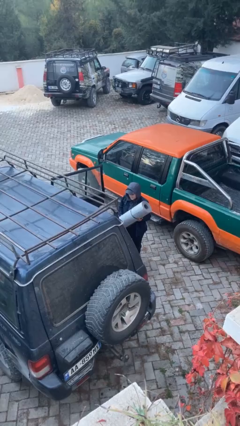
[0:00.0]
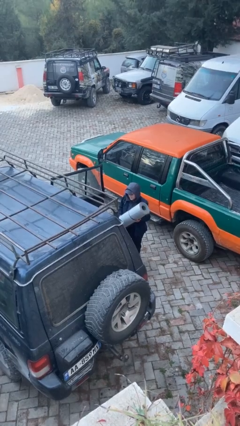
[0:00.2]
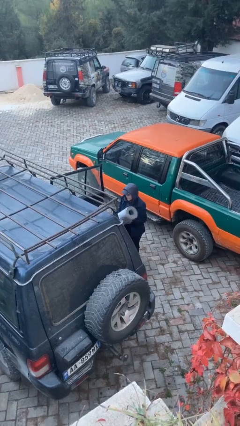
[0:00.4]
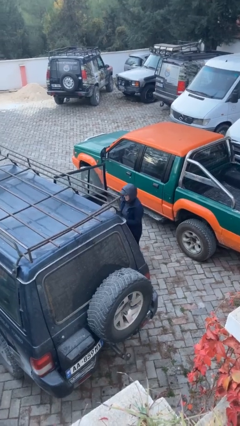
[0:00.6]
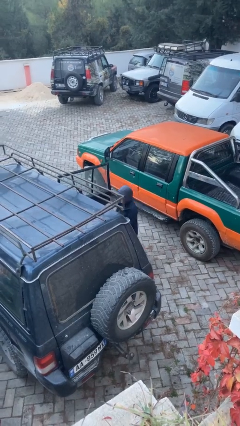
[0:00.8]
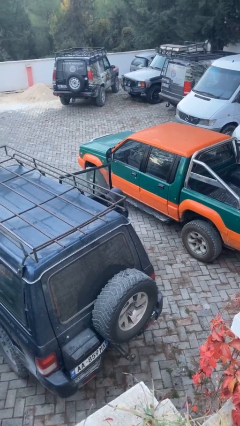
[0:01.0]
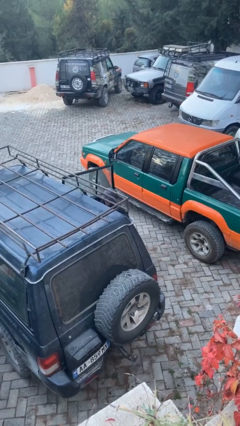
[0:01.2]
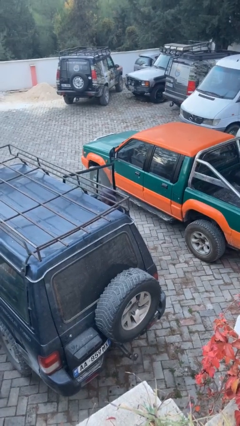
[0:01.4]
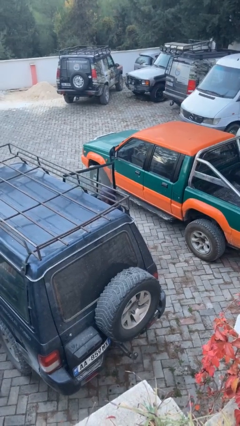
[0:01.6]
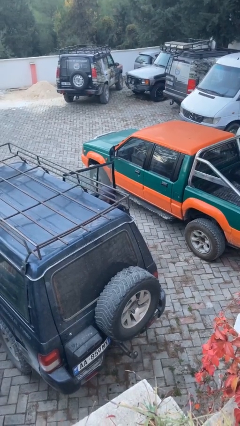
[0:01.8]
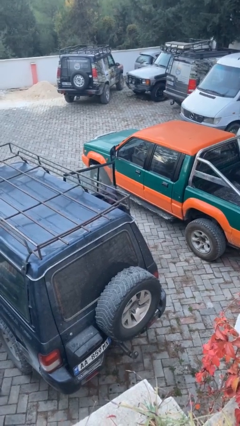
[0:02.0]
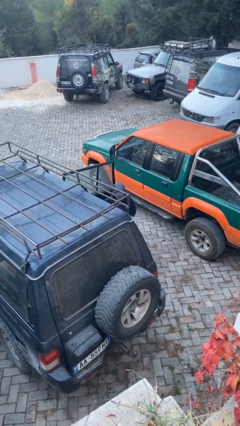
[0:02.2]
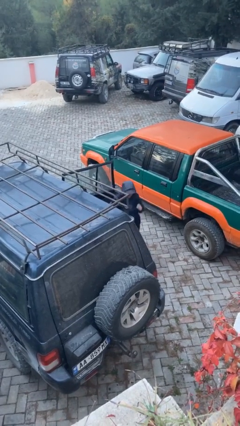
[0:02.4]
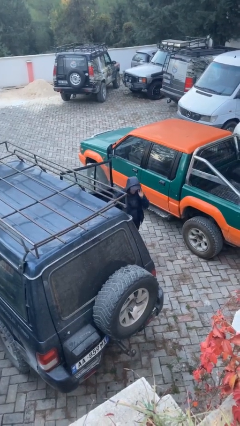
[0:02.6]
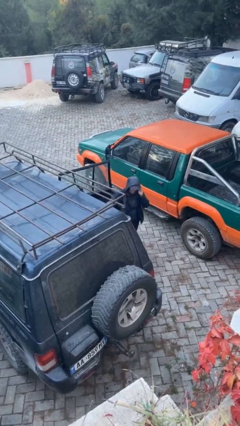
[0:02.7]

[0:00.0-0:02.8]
person loads car

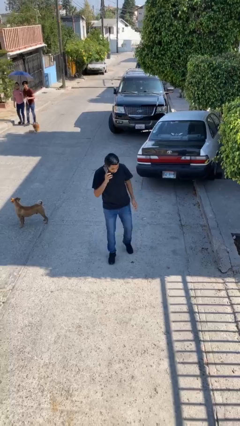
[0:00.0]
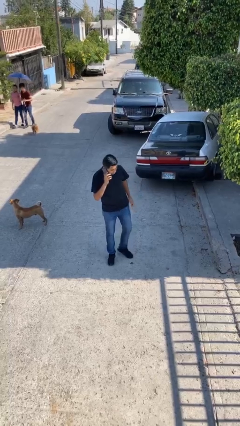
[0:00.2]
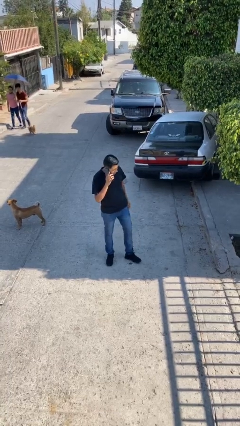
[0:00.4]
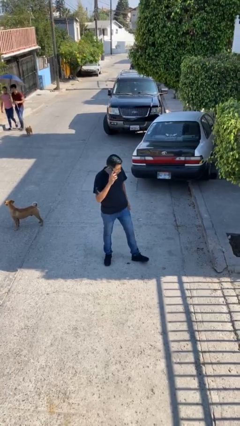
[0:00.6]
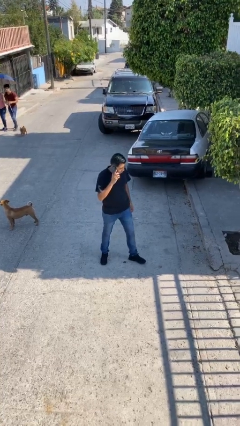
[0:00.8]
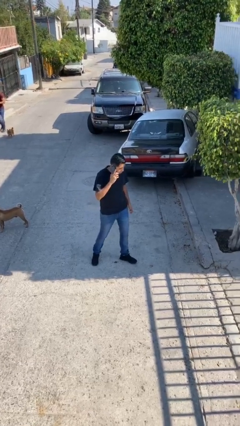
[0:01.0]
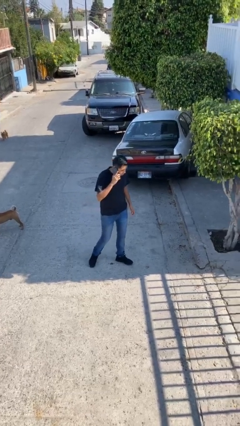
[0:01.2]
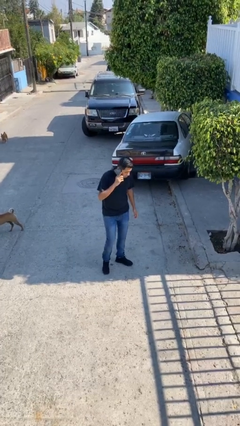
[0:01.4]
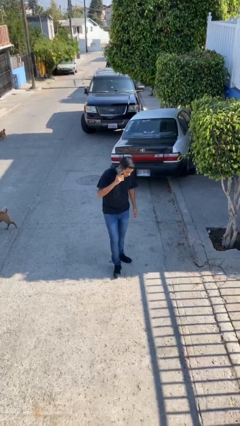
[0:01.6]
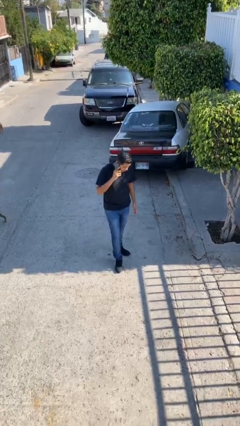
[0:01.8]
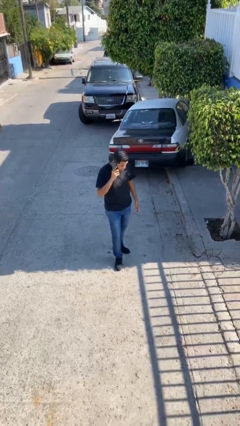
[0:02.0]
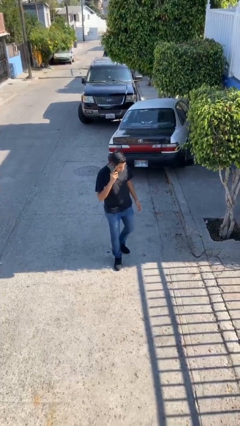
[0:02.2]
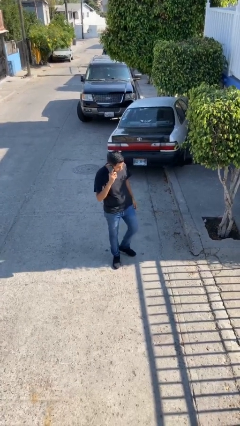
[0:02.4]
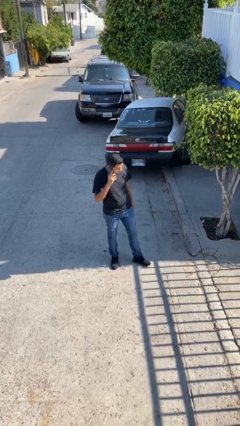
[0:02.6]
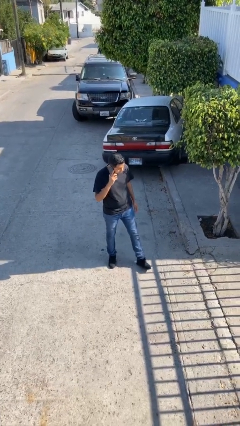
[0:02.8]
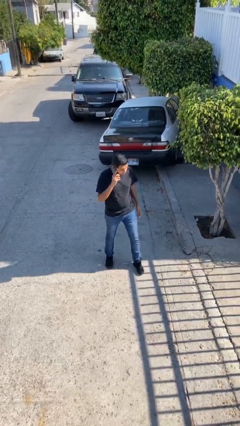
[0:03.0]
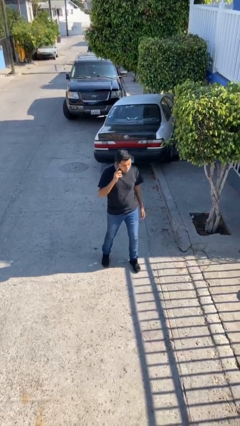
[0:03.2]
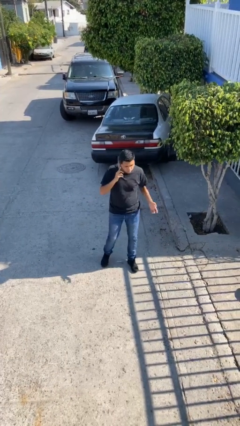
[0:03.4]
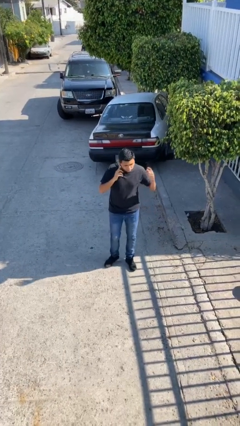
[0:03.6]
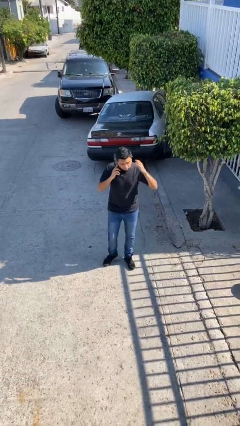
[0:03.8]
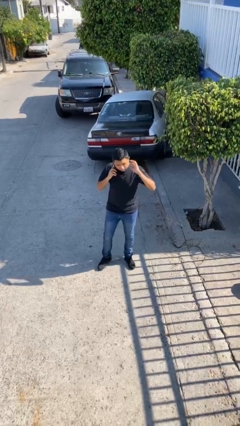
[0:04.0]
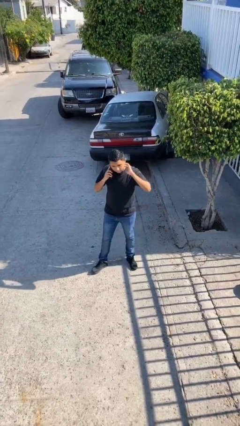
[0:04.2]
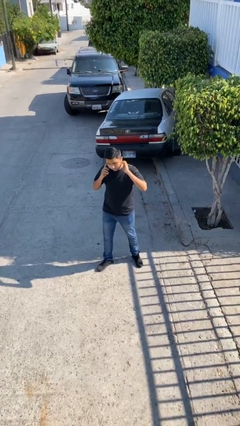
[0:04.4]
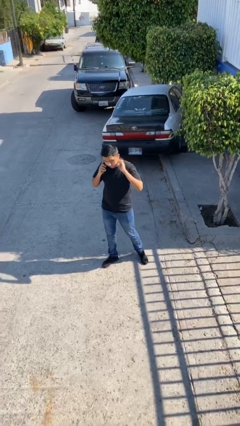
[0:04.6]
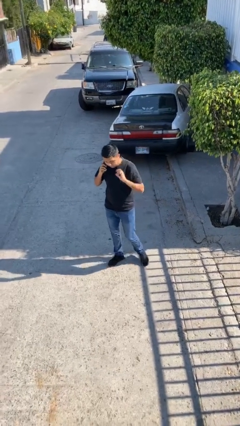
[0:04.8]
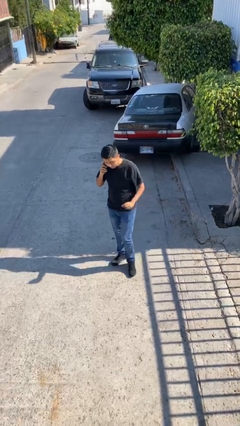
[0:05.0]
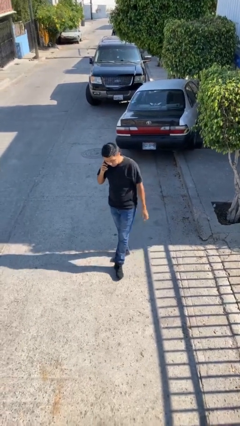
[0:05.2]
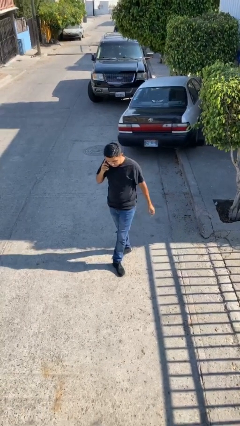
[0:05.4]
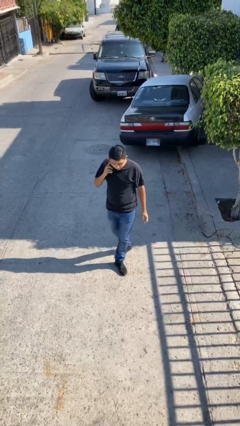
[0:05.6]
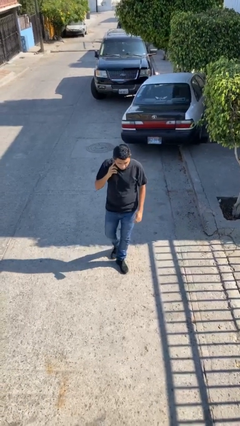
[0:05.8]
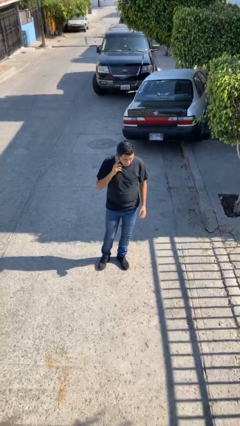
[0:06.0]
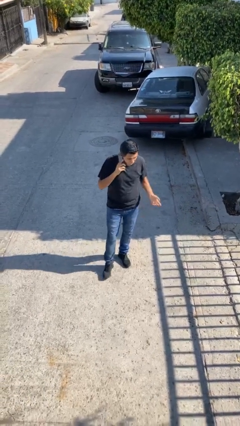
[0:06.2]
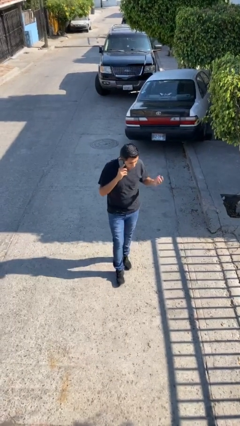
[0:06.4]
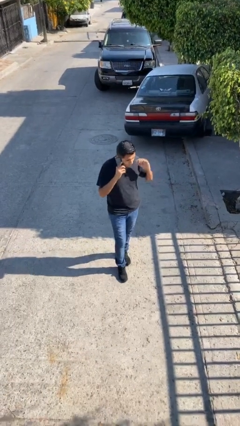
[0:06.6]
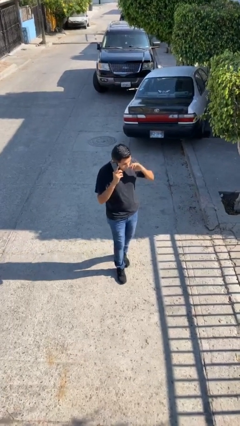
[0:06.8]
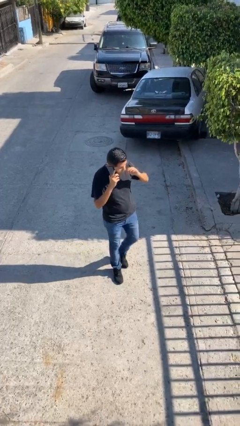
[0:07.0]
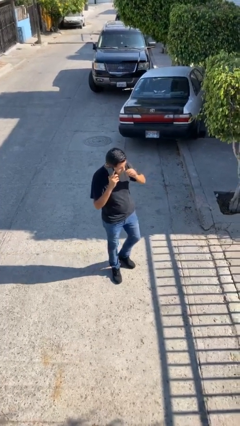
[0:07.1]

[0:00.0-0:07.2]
person talks on phone

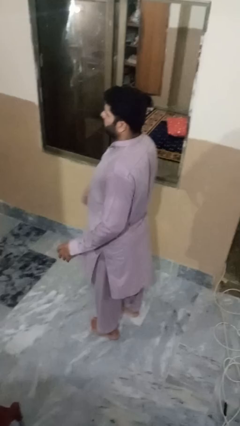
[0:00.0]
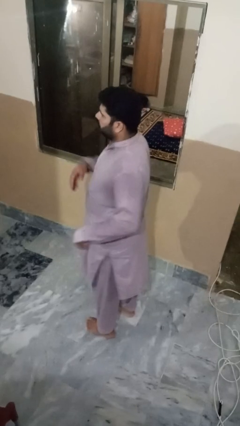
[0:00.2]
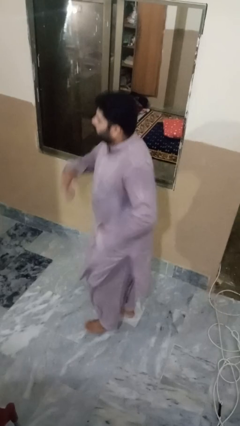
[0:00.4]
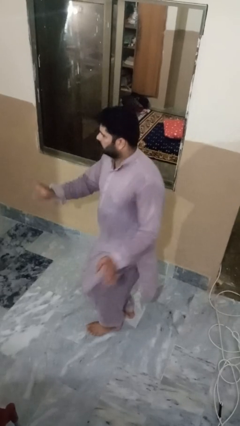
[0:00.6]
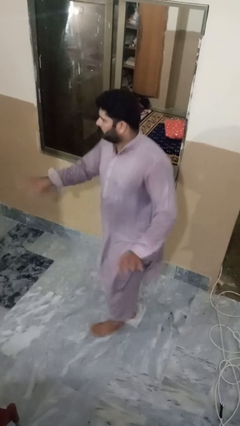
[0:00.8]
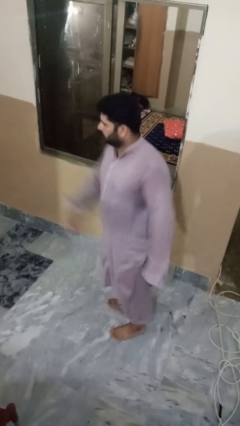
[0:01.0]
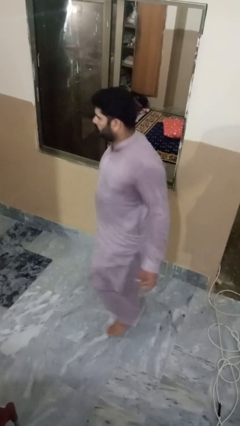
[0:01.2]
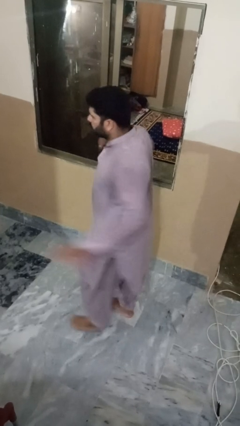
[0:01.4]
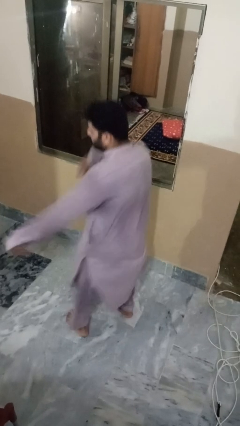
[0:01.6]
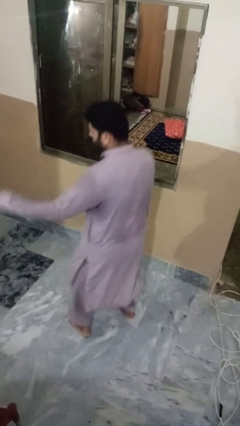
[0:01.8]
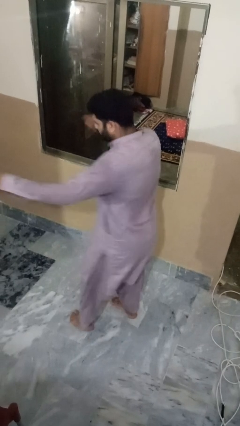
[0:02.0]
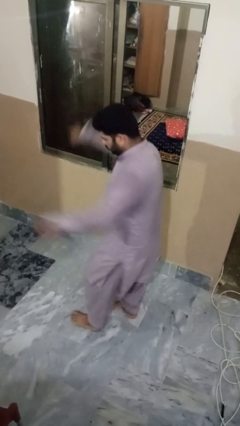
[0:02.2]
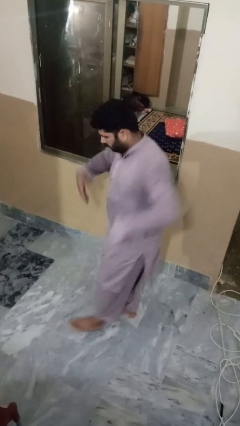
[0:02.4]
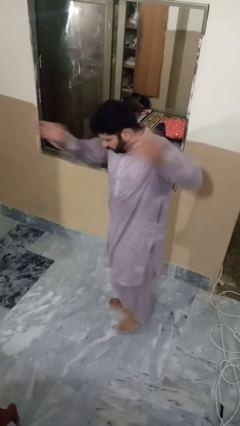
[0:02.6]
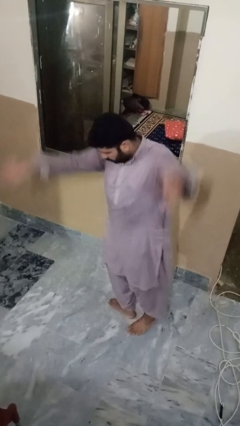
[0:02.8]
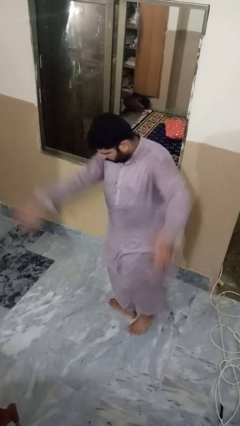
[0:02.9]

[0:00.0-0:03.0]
person dances in place

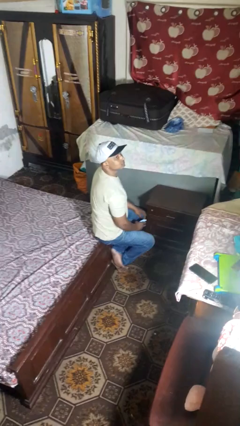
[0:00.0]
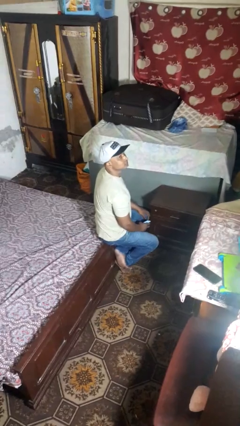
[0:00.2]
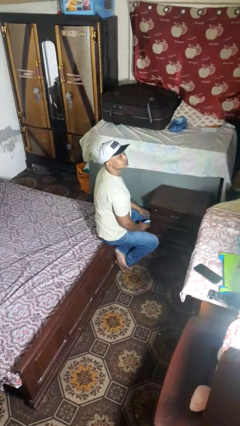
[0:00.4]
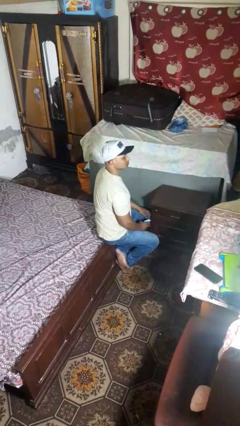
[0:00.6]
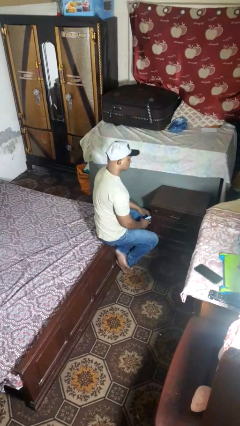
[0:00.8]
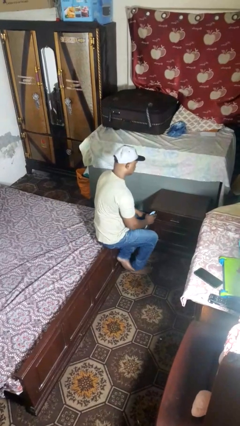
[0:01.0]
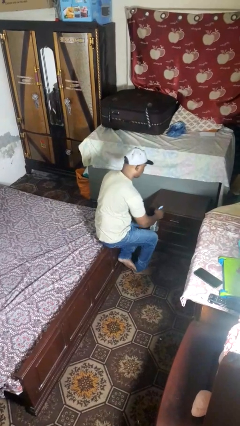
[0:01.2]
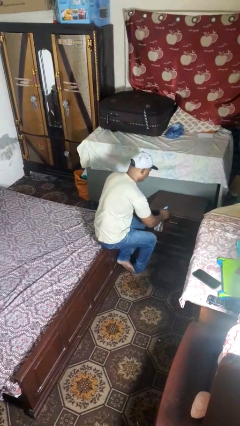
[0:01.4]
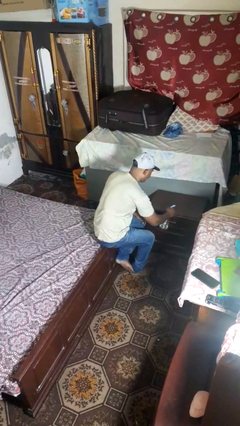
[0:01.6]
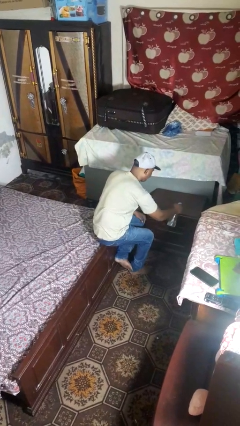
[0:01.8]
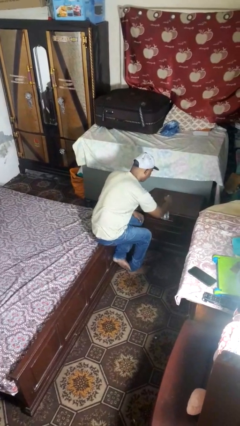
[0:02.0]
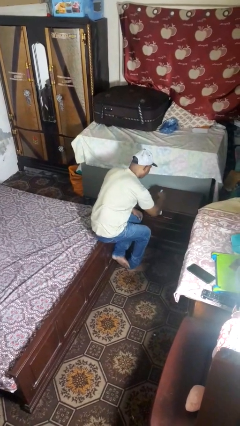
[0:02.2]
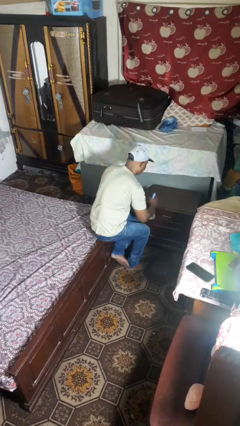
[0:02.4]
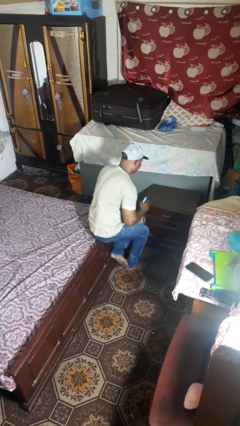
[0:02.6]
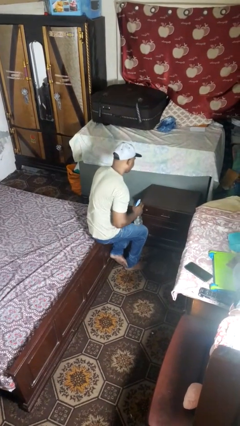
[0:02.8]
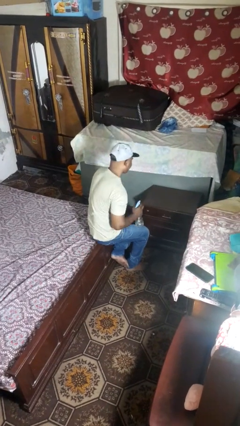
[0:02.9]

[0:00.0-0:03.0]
person sprays from bottle

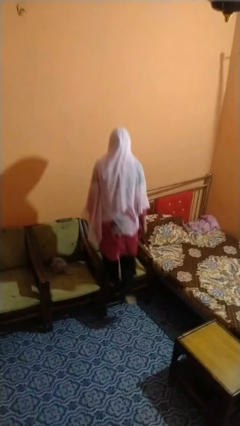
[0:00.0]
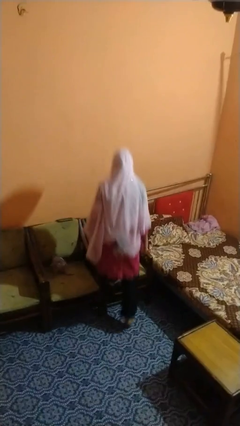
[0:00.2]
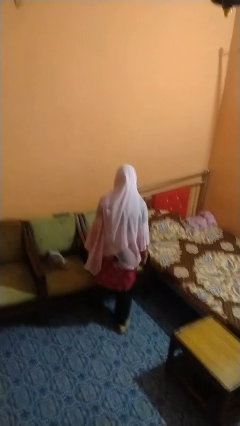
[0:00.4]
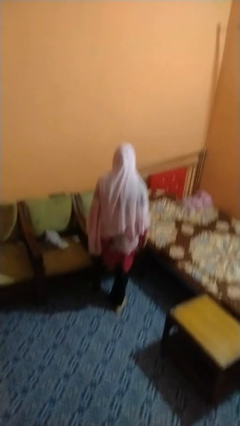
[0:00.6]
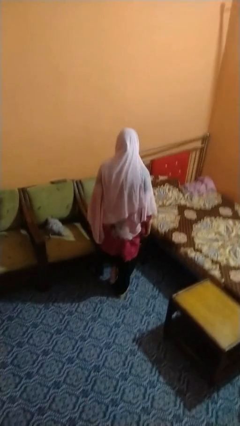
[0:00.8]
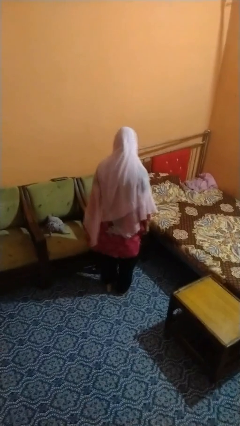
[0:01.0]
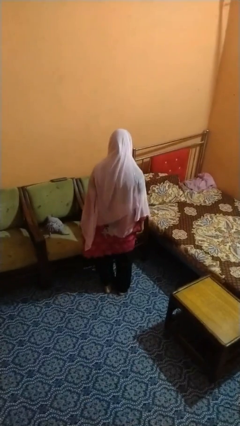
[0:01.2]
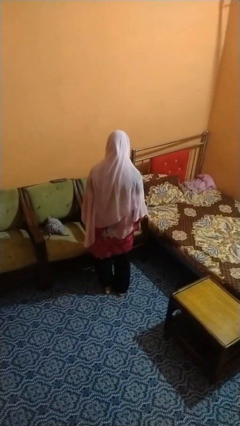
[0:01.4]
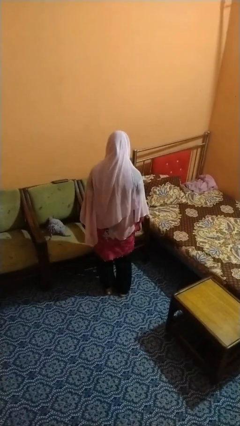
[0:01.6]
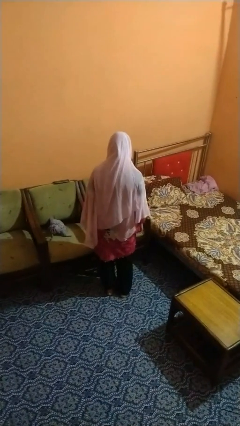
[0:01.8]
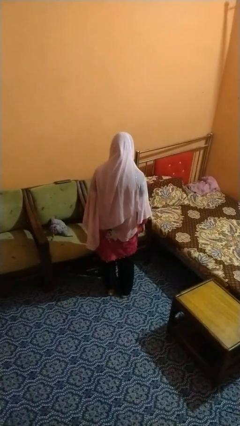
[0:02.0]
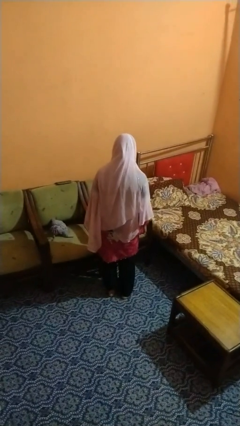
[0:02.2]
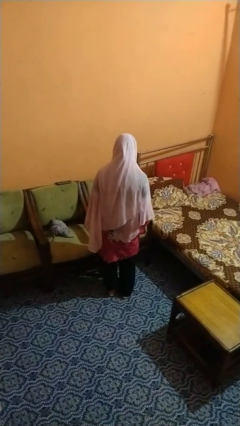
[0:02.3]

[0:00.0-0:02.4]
person climbs off chair
